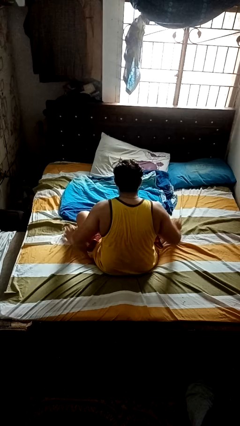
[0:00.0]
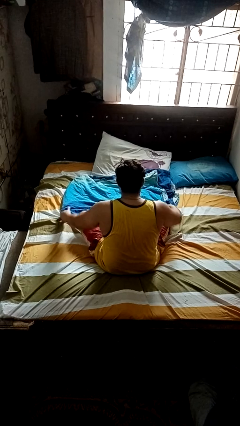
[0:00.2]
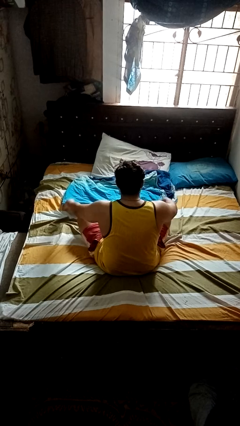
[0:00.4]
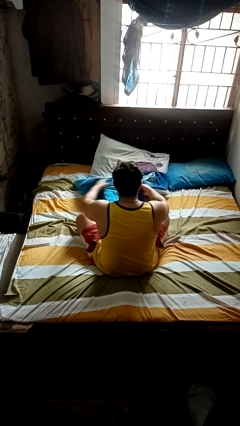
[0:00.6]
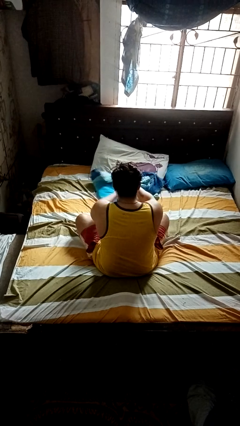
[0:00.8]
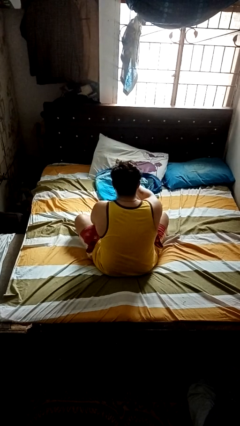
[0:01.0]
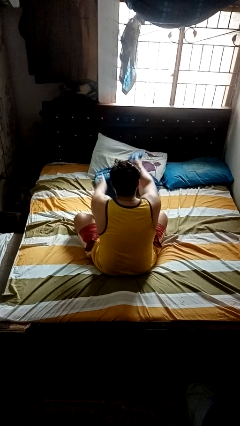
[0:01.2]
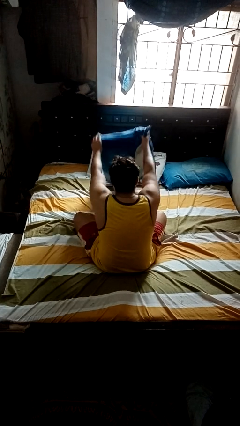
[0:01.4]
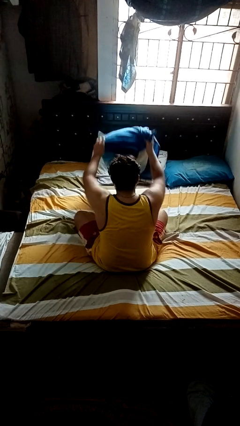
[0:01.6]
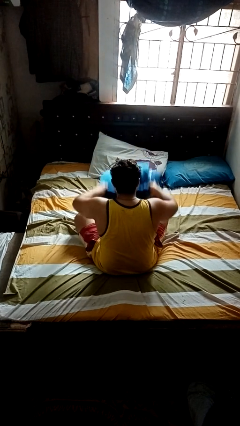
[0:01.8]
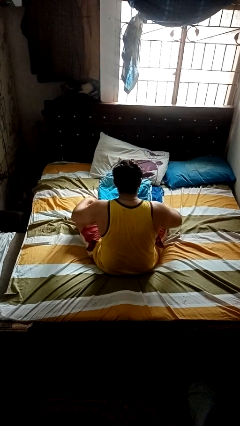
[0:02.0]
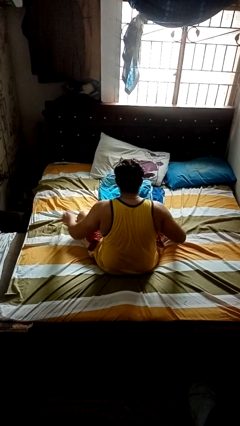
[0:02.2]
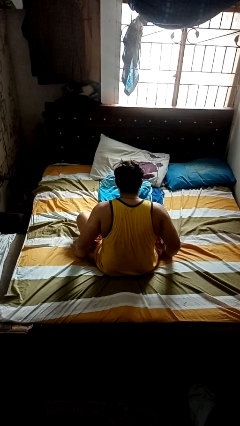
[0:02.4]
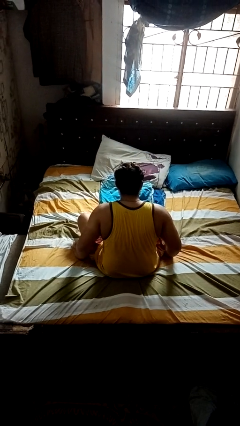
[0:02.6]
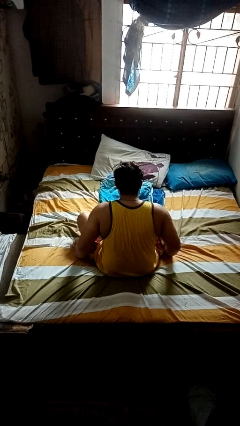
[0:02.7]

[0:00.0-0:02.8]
person folds blanket

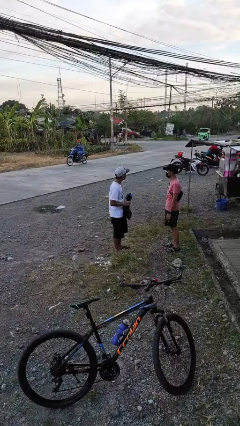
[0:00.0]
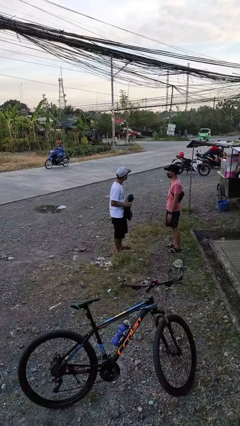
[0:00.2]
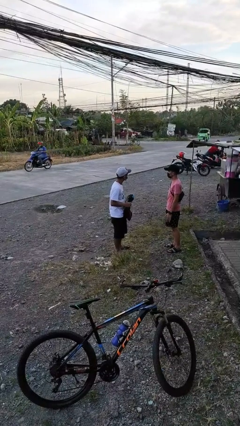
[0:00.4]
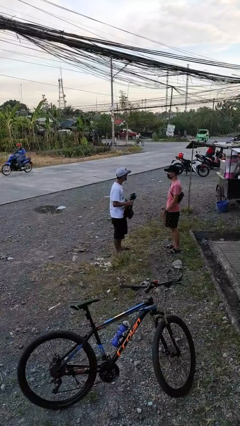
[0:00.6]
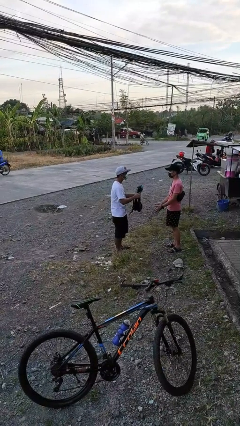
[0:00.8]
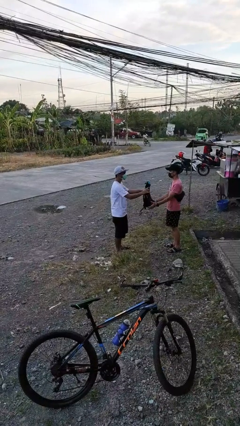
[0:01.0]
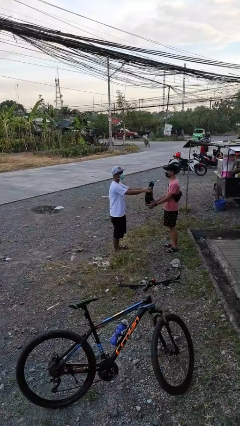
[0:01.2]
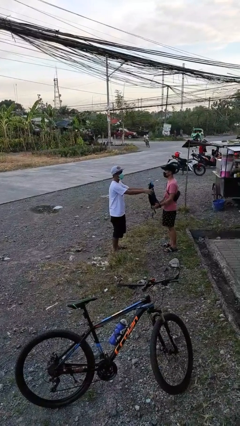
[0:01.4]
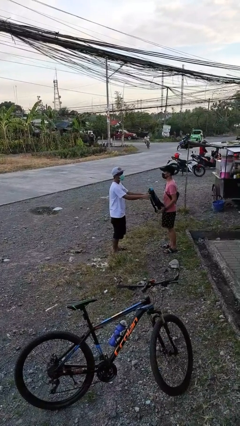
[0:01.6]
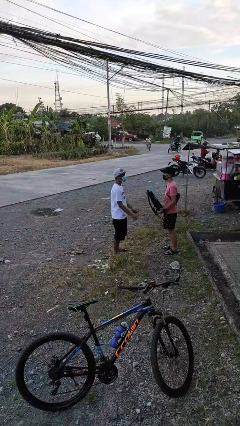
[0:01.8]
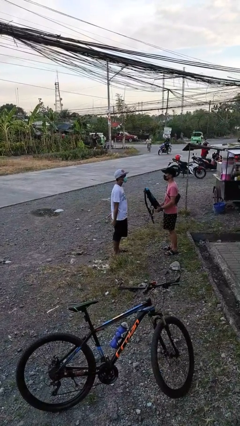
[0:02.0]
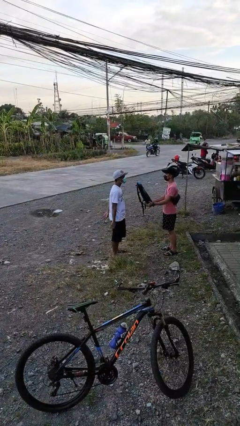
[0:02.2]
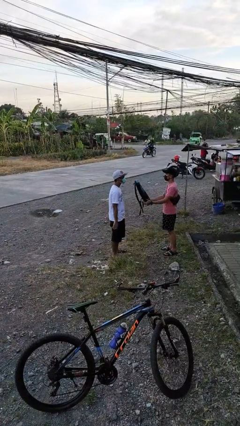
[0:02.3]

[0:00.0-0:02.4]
person transfers object to person

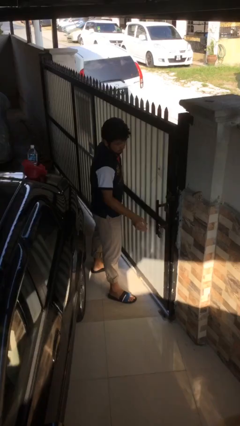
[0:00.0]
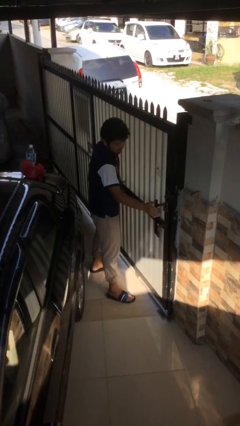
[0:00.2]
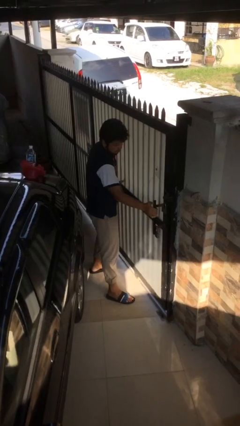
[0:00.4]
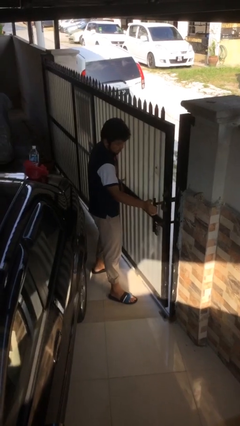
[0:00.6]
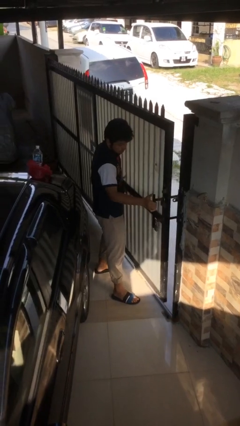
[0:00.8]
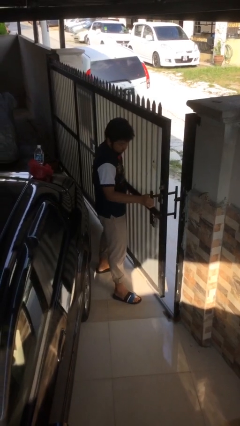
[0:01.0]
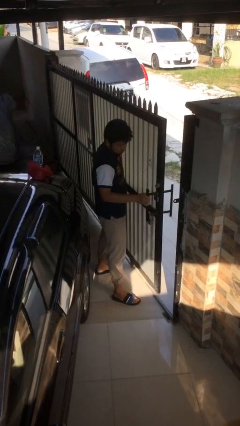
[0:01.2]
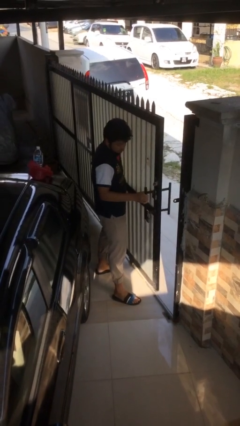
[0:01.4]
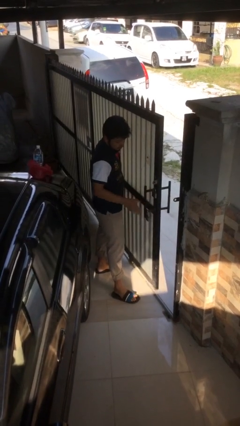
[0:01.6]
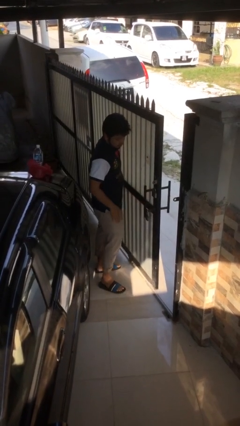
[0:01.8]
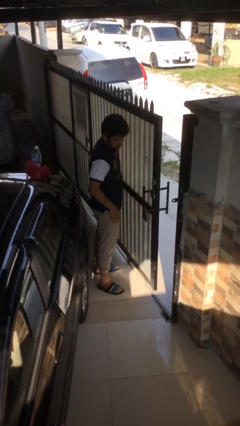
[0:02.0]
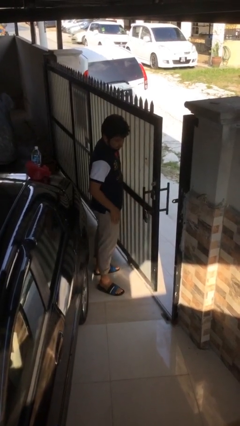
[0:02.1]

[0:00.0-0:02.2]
person opens sliding door

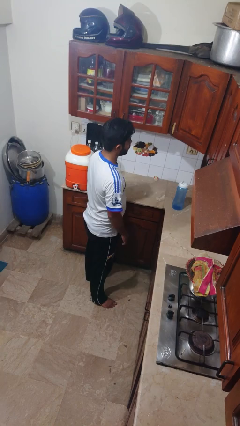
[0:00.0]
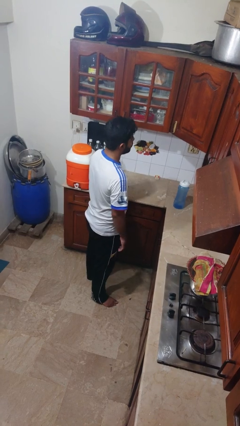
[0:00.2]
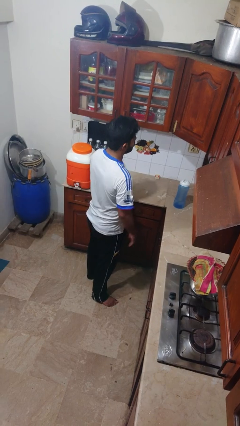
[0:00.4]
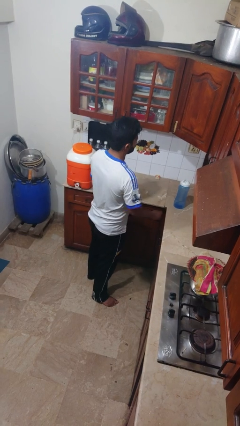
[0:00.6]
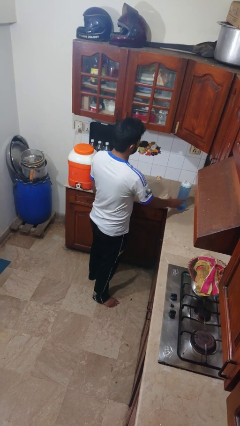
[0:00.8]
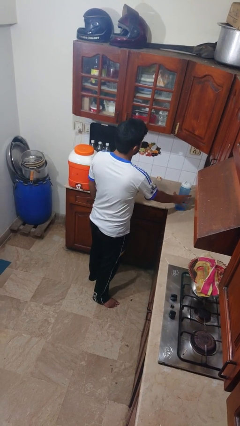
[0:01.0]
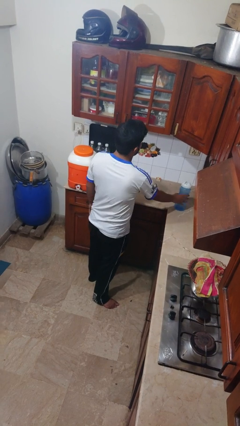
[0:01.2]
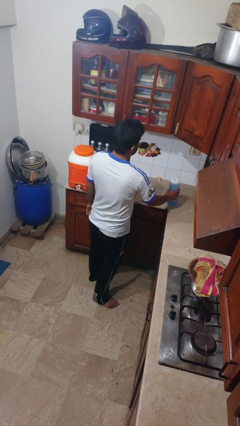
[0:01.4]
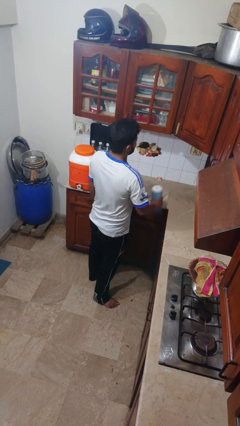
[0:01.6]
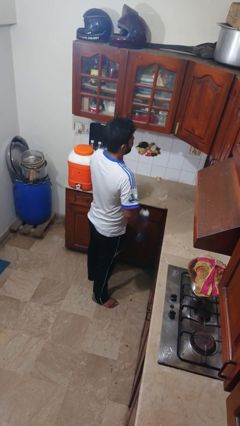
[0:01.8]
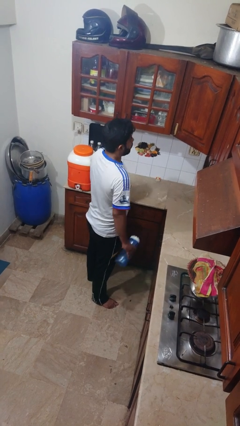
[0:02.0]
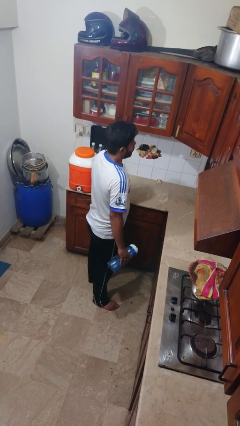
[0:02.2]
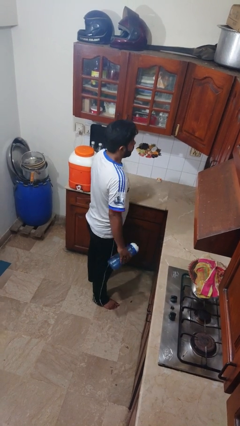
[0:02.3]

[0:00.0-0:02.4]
person picks up object from countertop

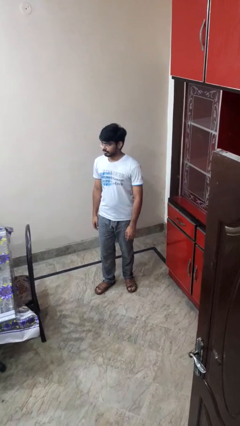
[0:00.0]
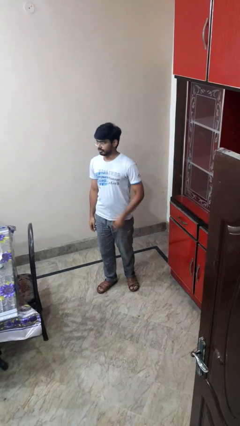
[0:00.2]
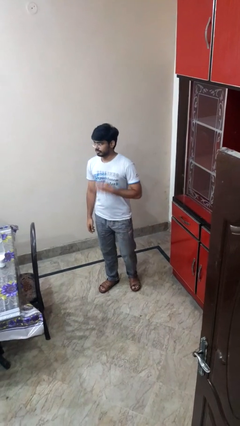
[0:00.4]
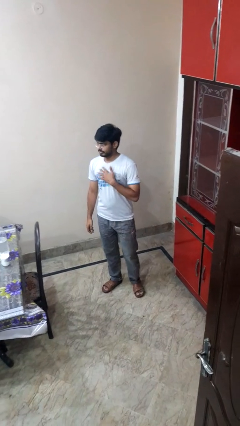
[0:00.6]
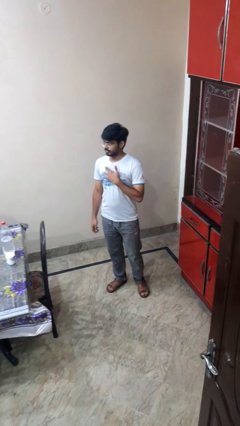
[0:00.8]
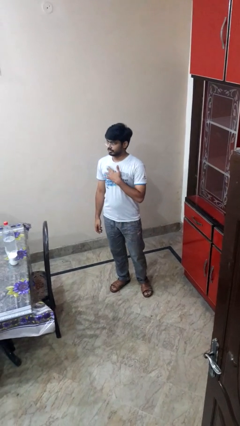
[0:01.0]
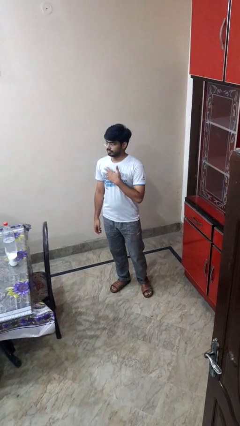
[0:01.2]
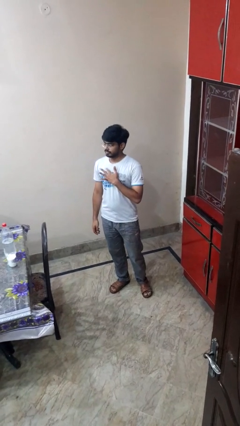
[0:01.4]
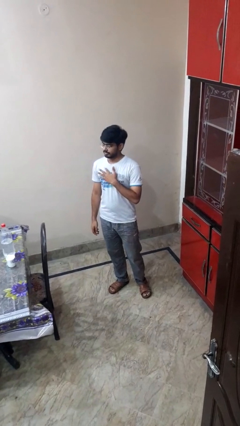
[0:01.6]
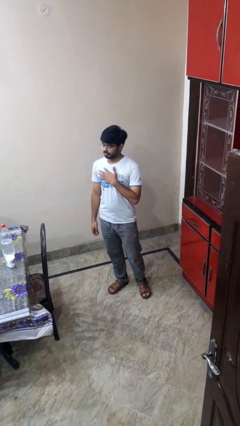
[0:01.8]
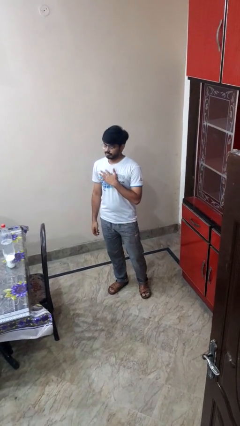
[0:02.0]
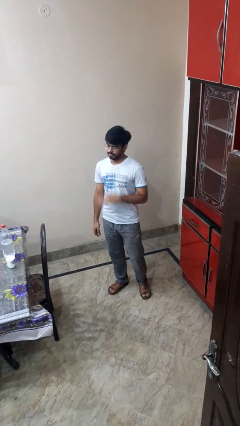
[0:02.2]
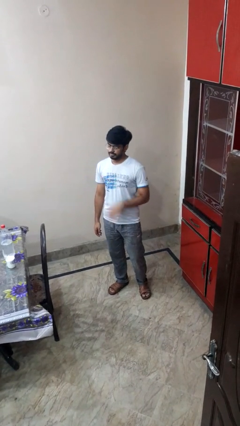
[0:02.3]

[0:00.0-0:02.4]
person drums on chest

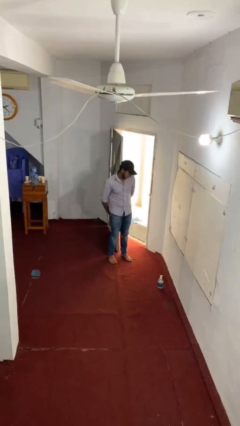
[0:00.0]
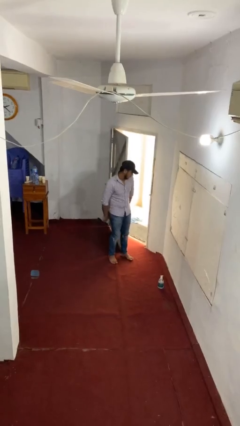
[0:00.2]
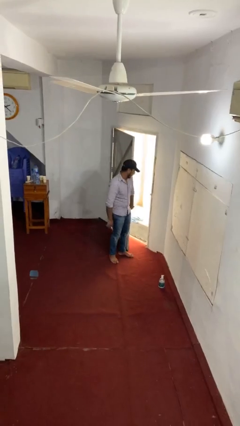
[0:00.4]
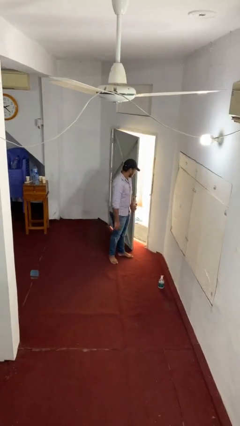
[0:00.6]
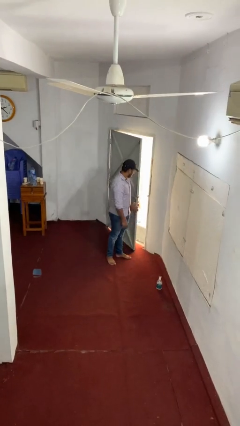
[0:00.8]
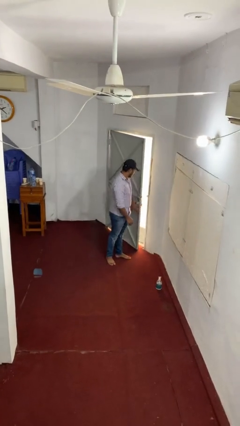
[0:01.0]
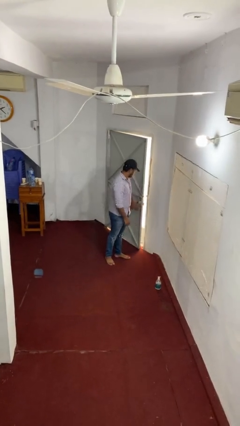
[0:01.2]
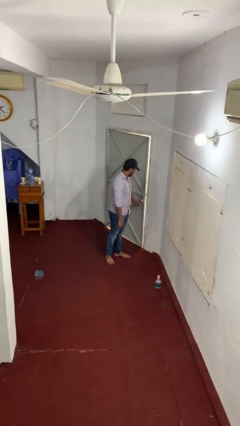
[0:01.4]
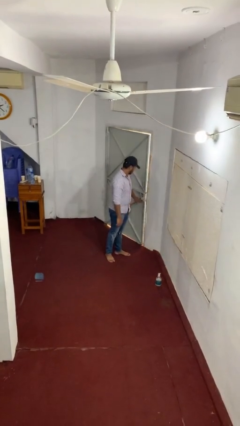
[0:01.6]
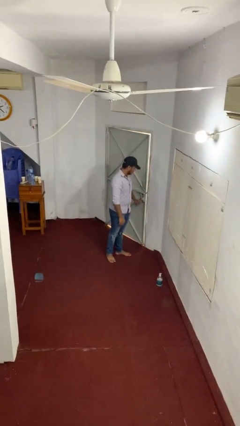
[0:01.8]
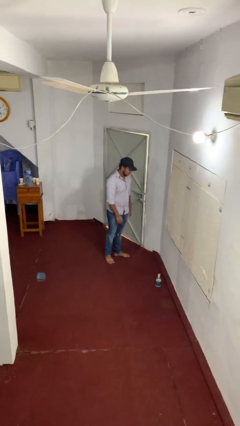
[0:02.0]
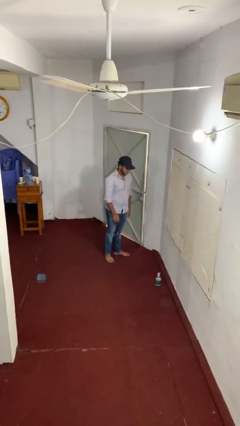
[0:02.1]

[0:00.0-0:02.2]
person closes facility door

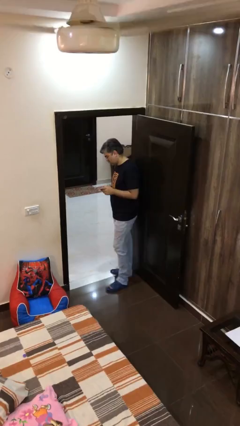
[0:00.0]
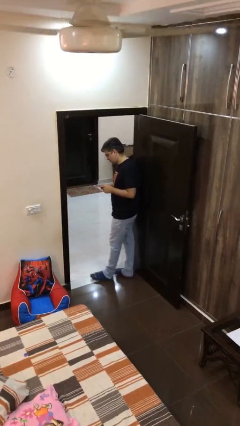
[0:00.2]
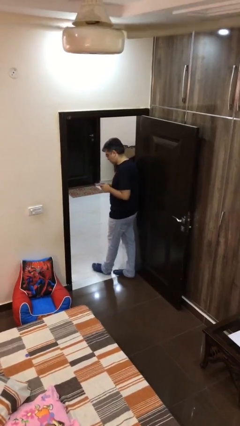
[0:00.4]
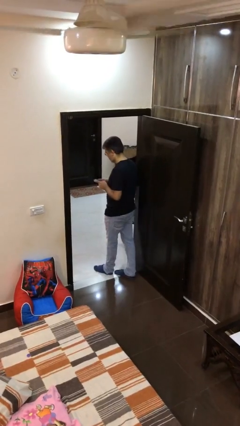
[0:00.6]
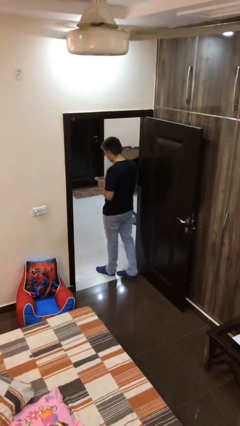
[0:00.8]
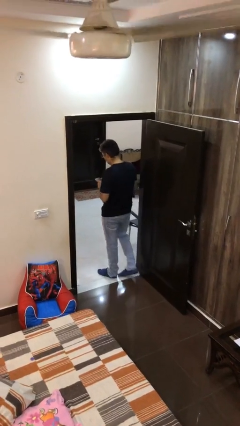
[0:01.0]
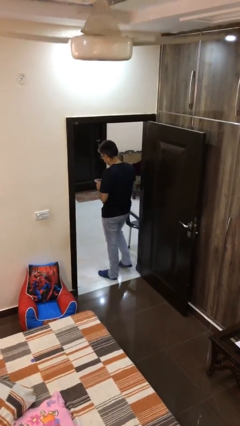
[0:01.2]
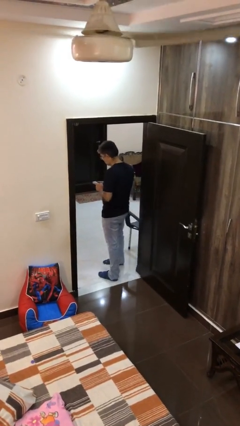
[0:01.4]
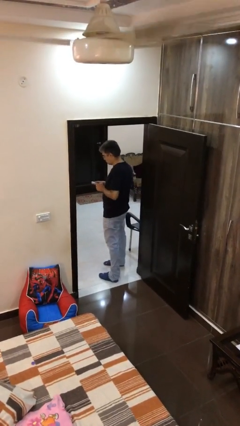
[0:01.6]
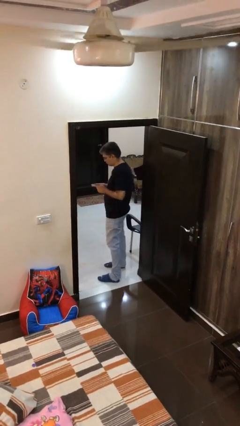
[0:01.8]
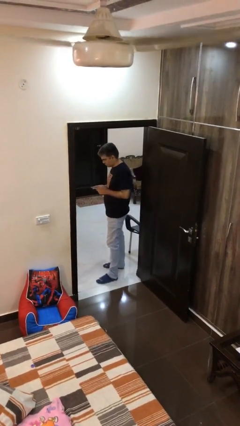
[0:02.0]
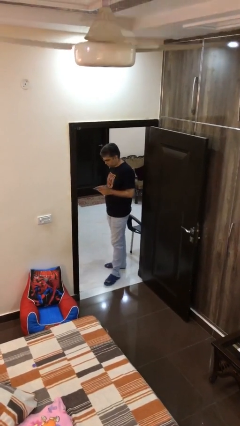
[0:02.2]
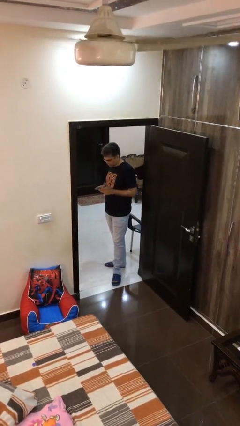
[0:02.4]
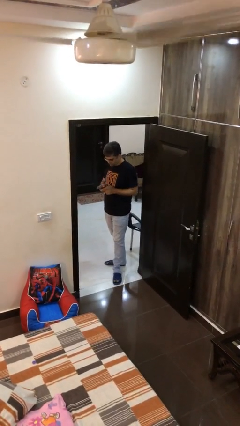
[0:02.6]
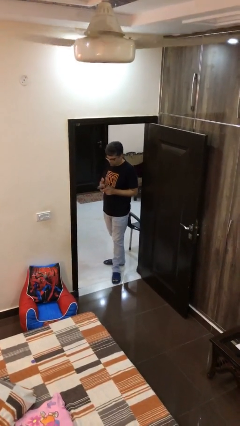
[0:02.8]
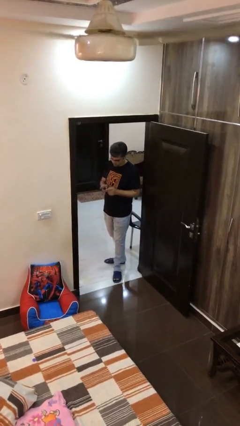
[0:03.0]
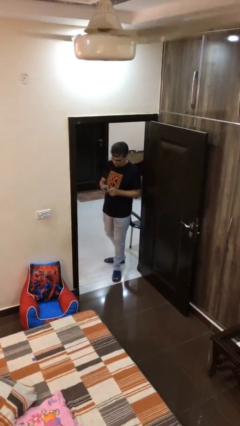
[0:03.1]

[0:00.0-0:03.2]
person texts on phone
